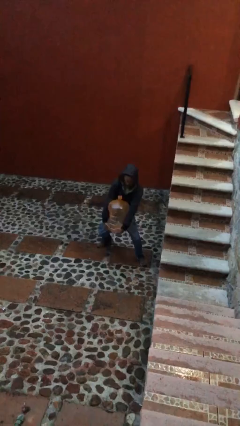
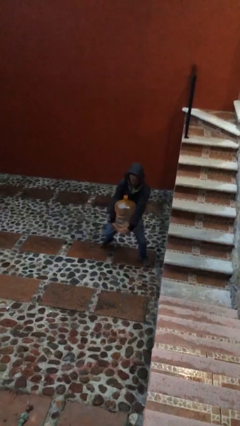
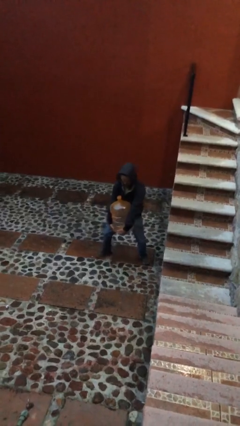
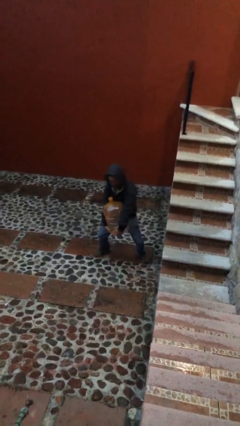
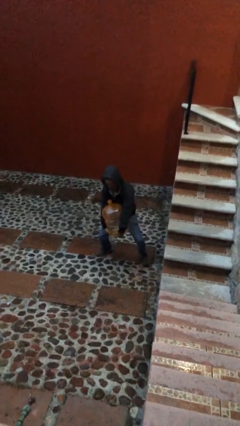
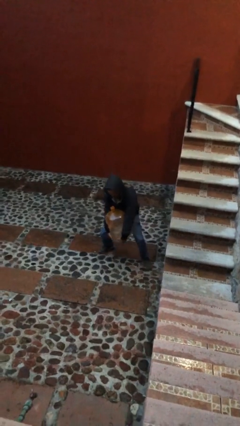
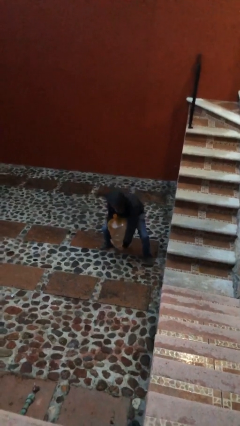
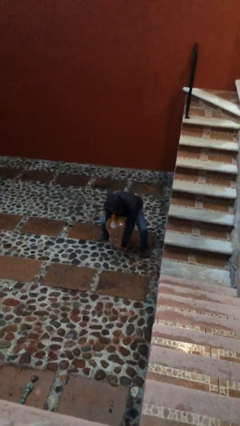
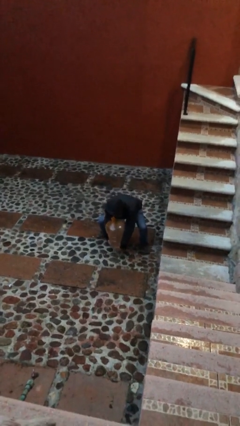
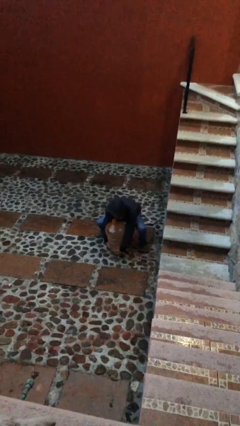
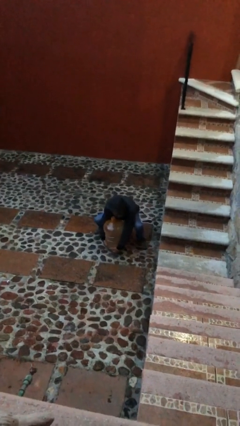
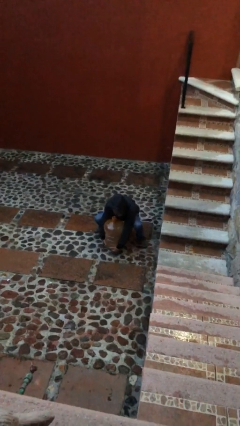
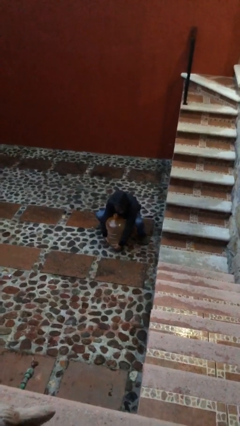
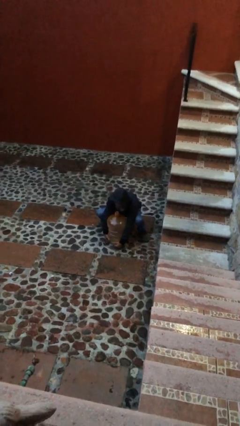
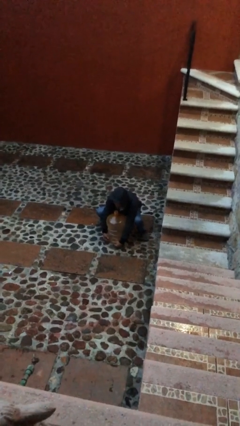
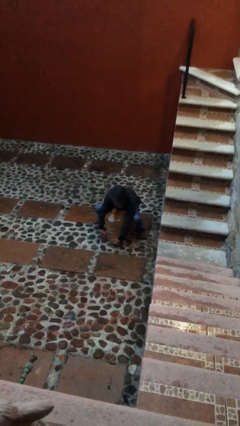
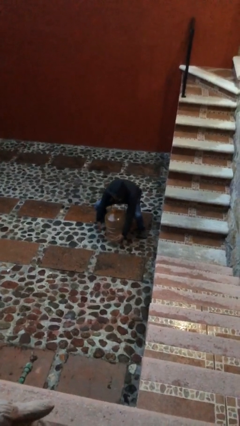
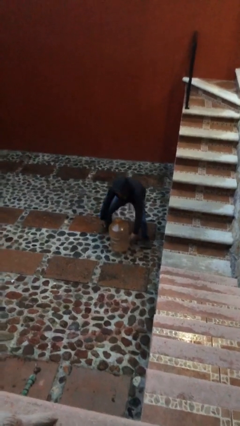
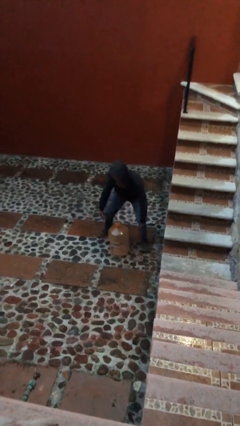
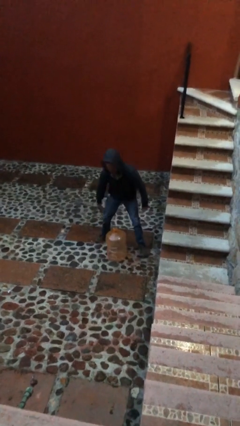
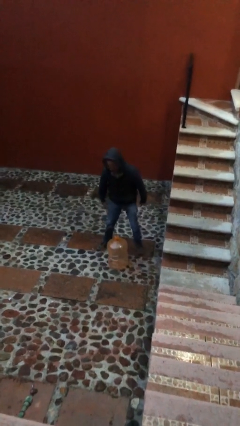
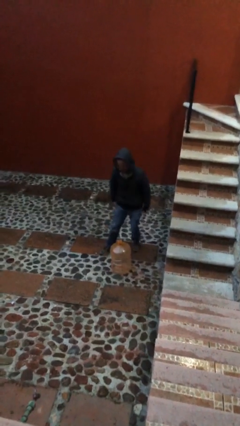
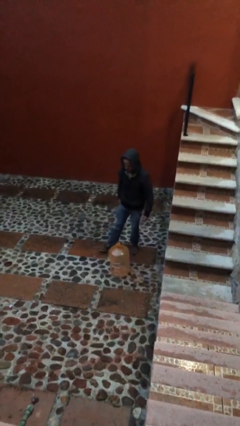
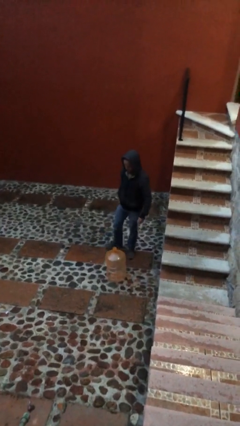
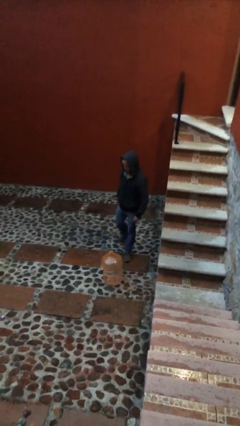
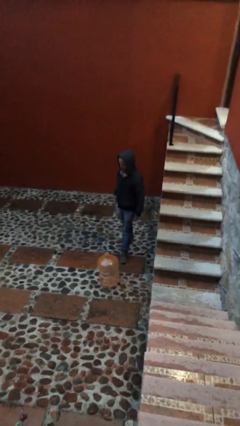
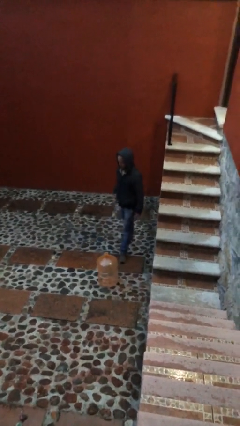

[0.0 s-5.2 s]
person puts down object on floor

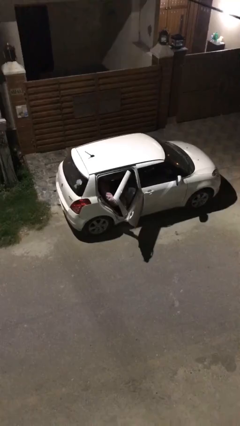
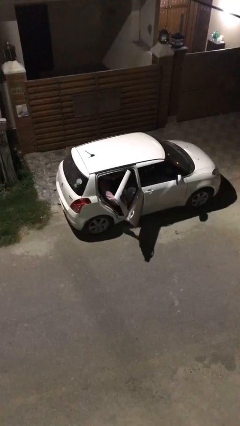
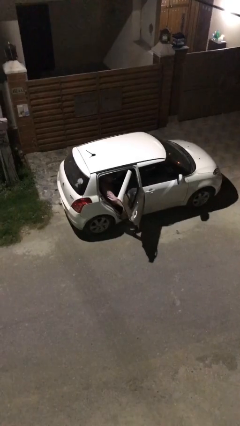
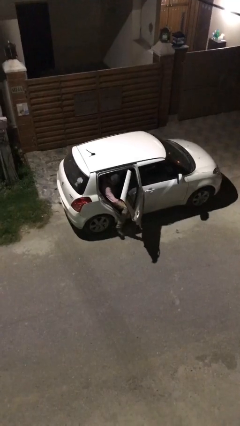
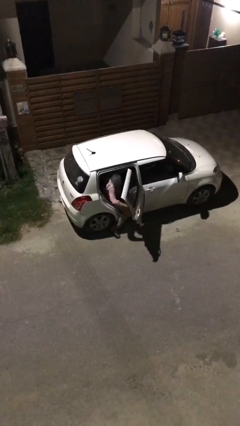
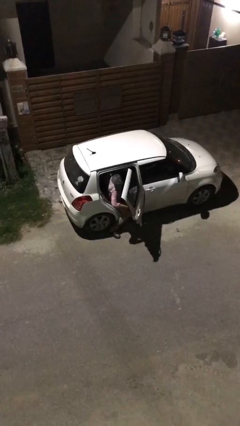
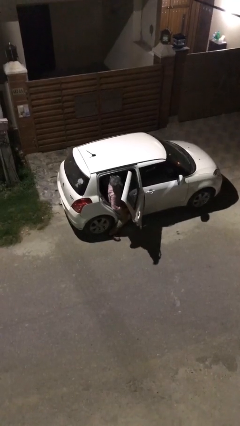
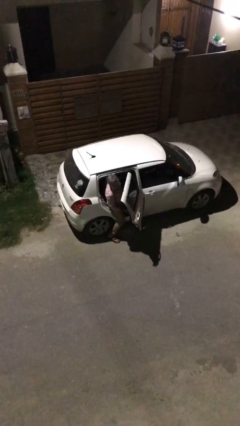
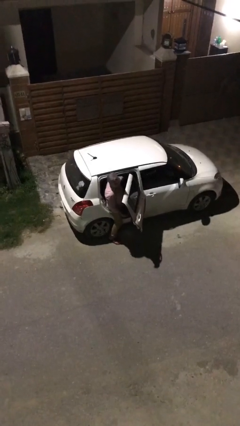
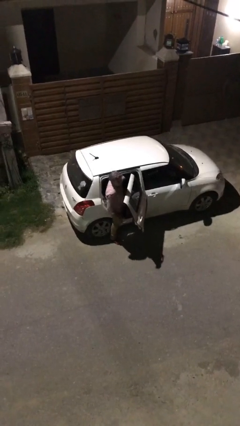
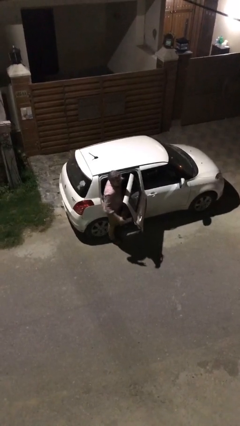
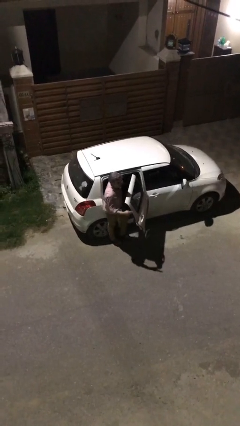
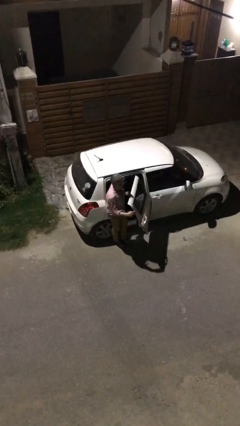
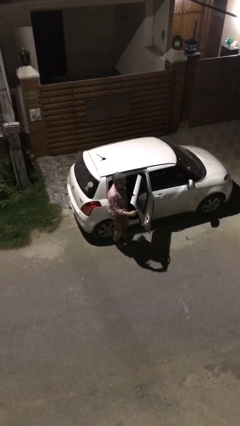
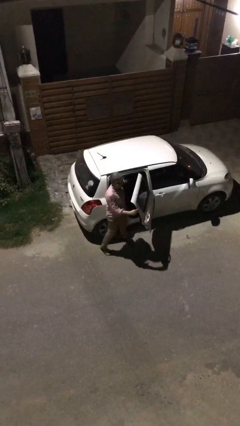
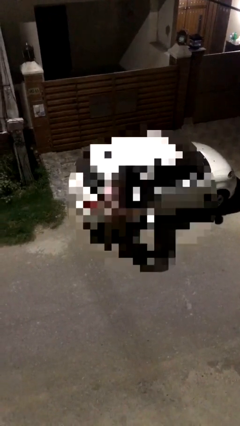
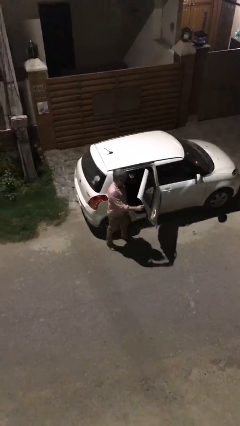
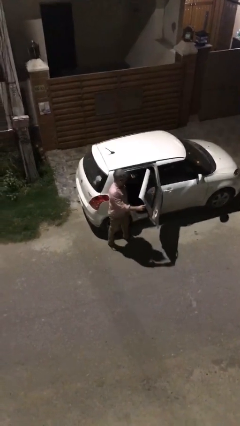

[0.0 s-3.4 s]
person exits car

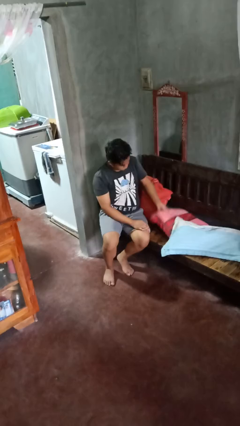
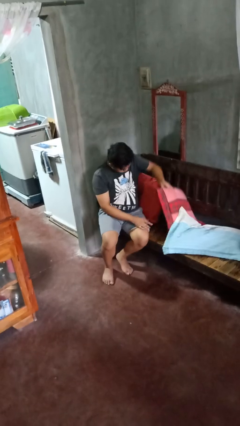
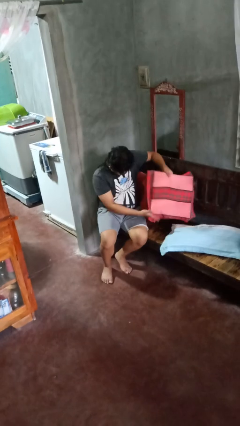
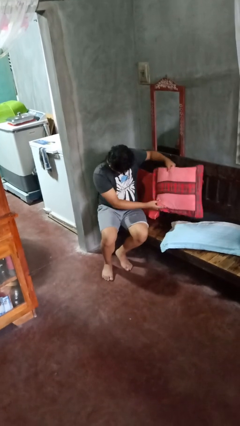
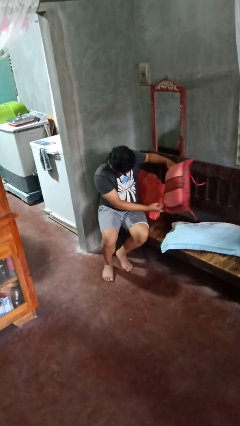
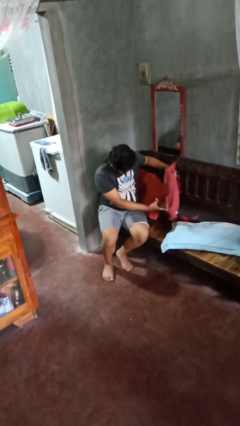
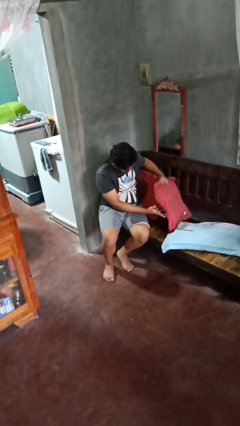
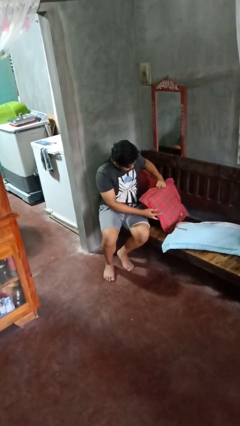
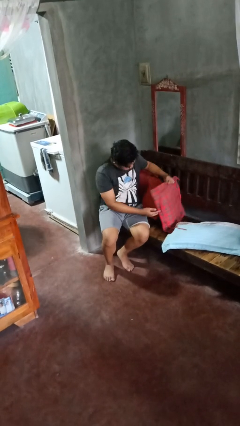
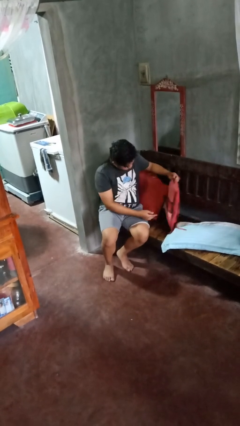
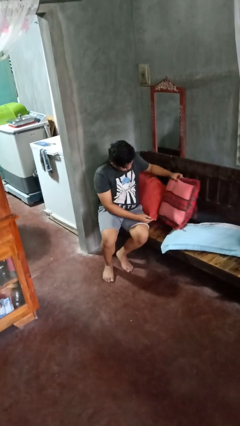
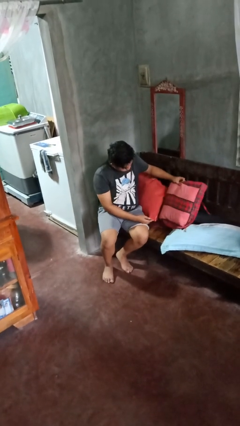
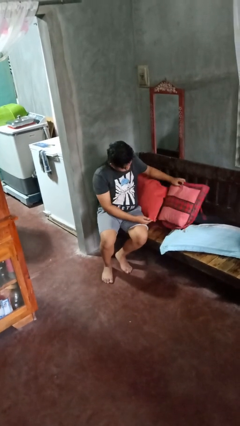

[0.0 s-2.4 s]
person searches in couch

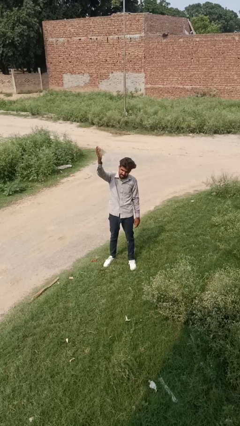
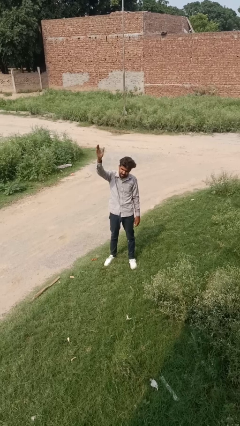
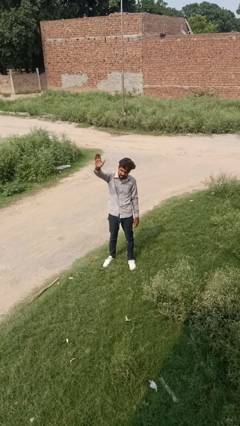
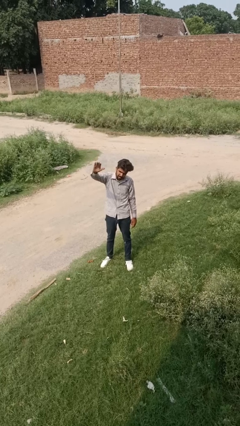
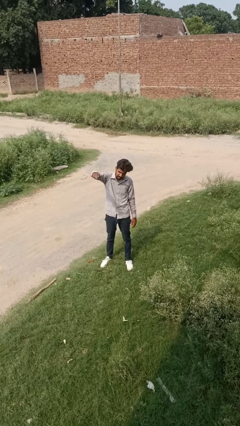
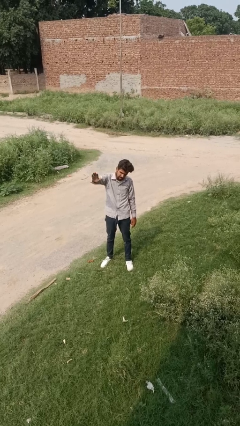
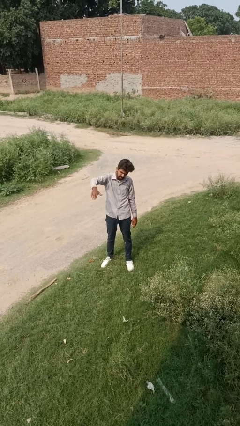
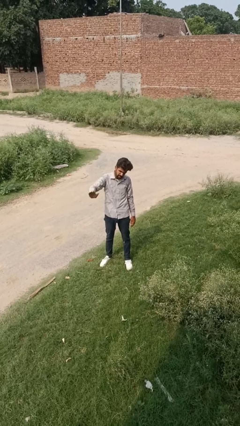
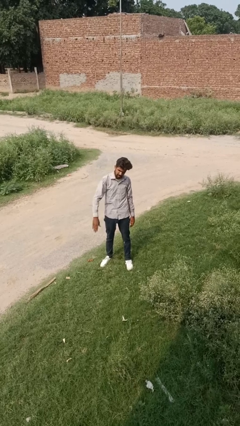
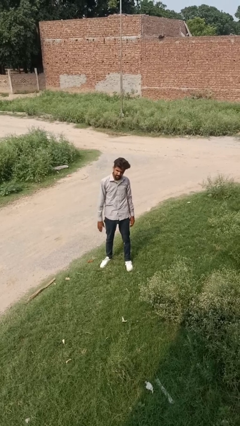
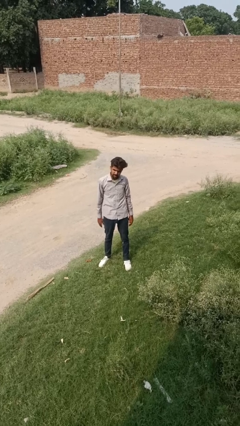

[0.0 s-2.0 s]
person gestures swipe down

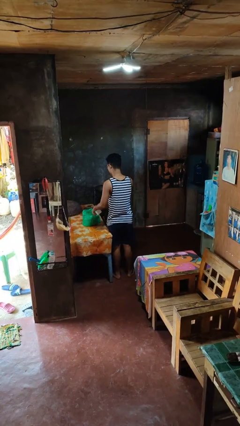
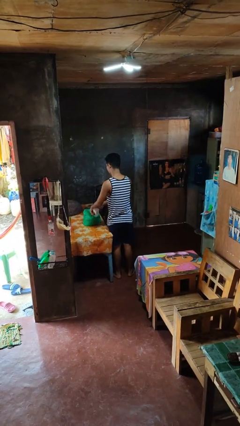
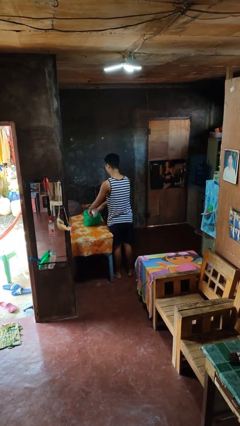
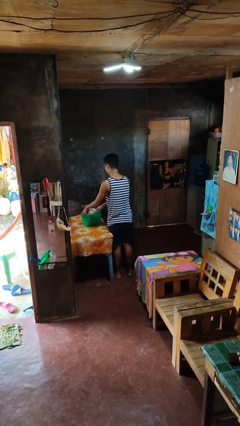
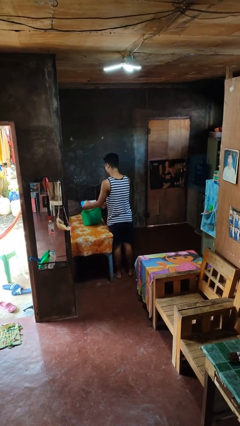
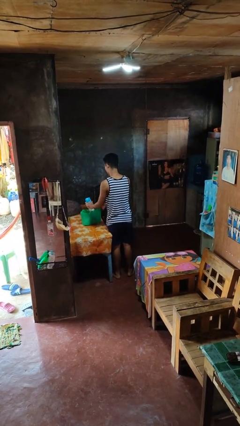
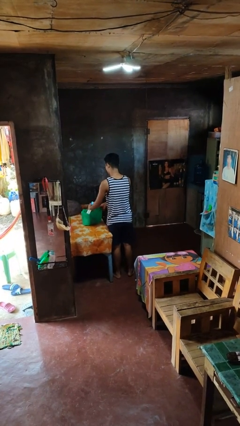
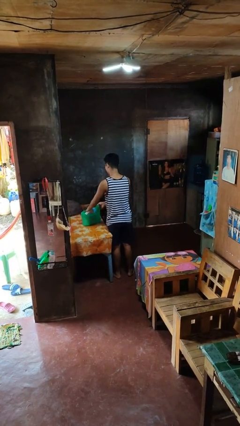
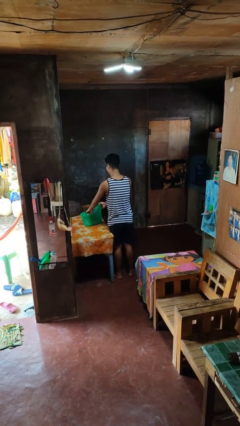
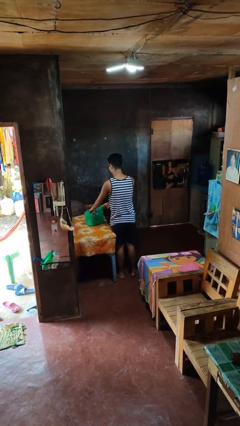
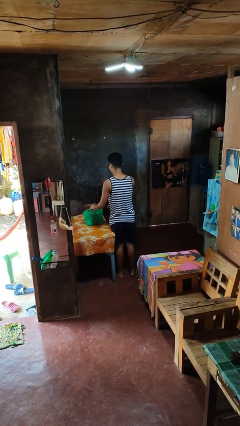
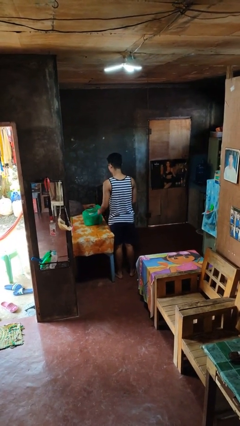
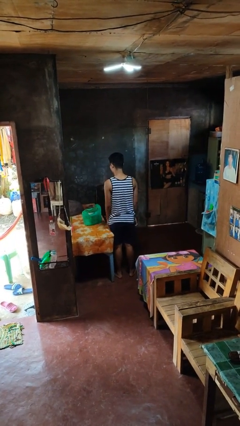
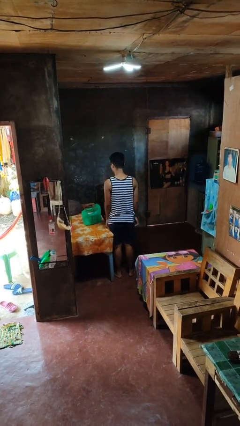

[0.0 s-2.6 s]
person puts object into bag

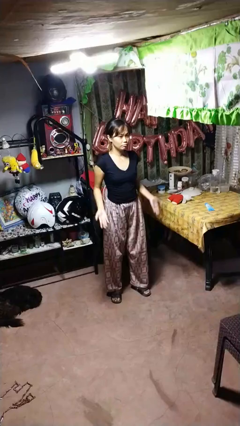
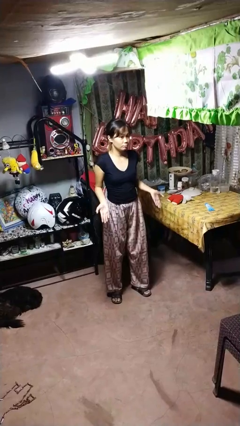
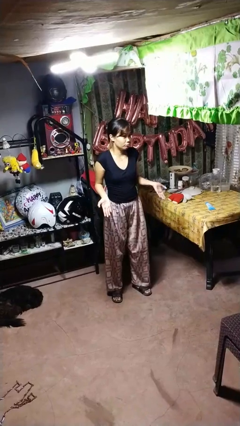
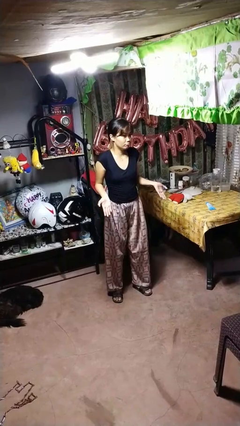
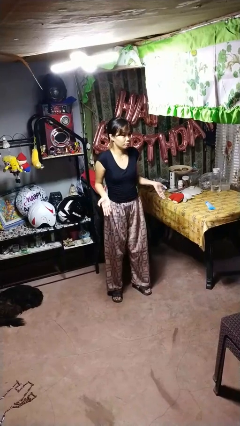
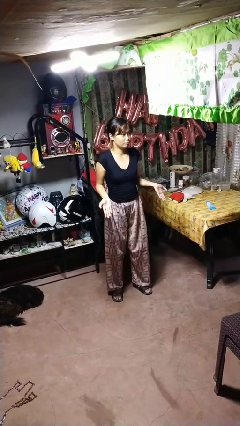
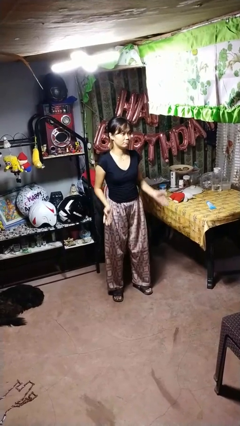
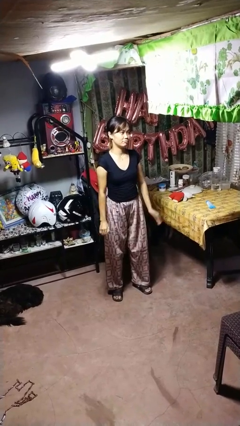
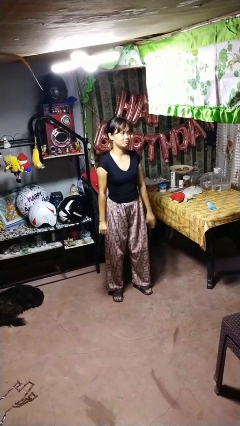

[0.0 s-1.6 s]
person shrugs
